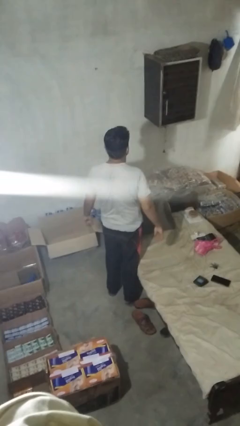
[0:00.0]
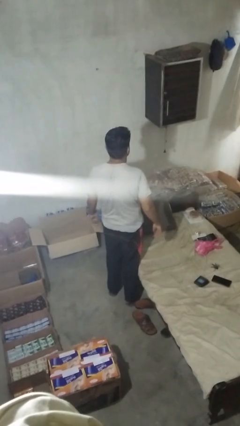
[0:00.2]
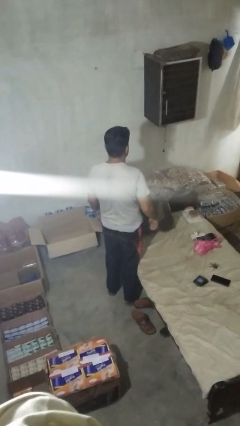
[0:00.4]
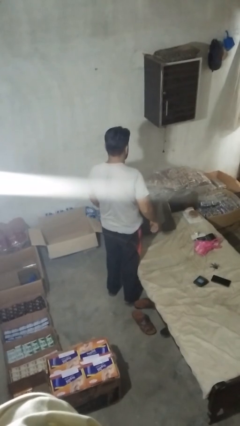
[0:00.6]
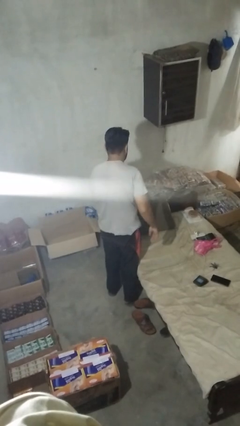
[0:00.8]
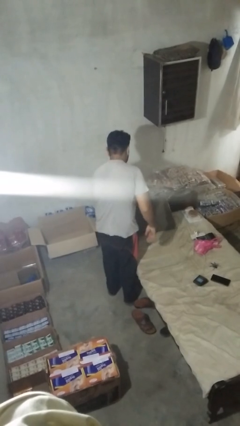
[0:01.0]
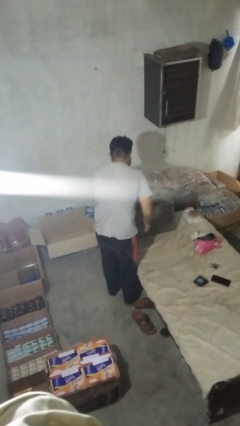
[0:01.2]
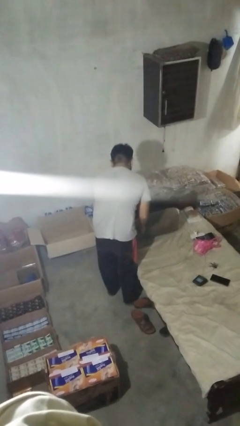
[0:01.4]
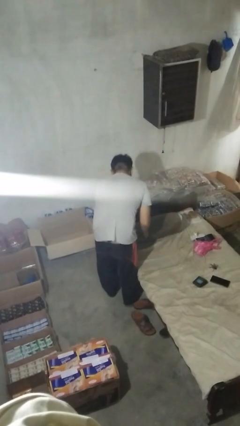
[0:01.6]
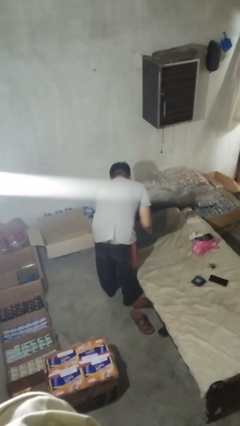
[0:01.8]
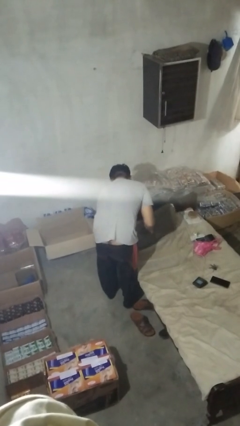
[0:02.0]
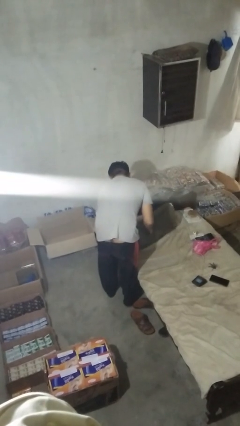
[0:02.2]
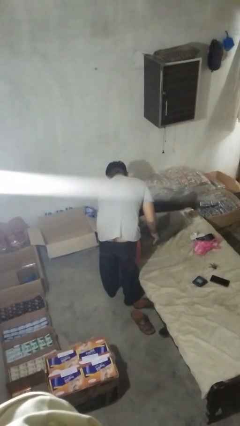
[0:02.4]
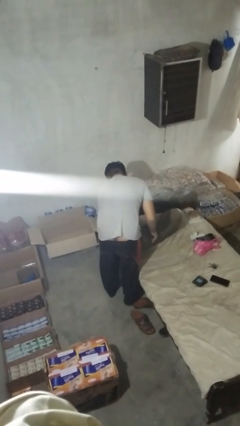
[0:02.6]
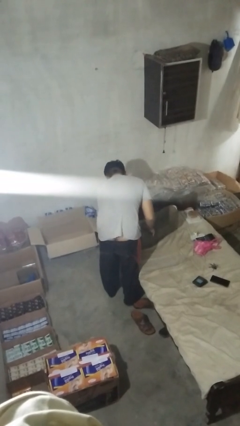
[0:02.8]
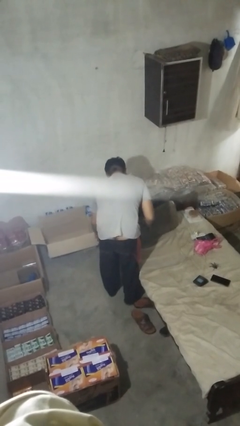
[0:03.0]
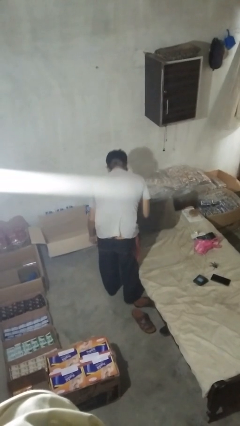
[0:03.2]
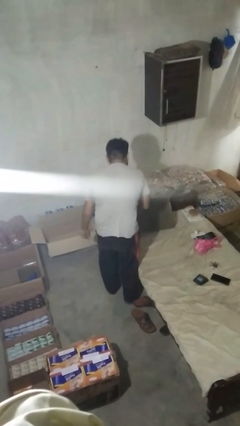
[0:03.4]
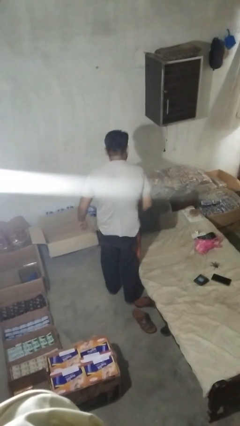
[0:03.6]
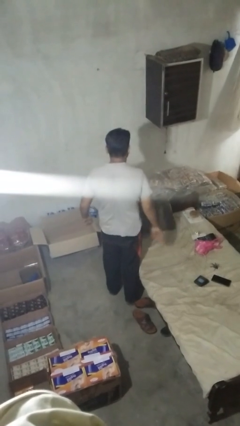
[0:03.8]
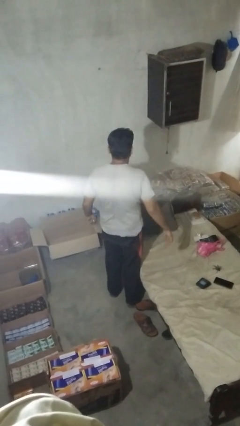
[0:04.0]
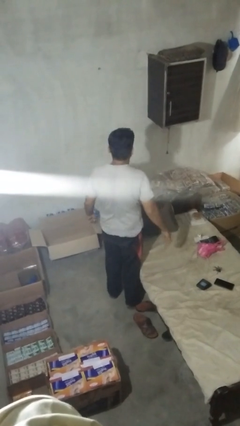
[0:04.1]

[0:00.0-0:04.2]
person searches in couch

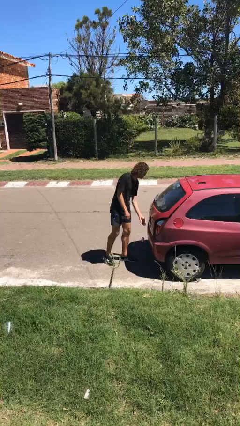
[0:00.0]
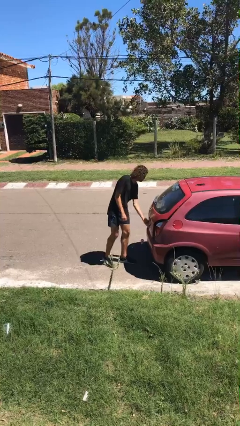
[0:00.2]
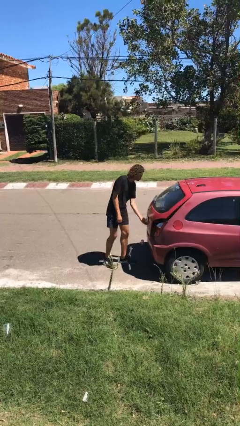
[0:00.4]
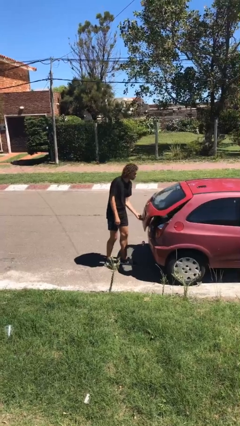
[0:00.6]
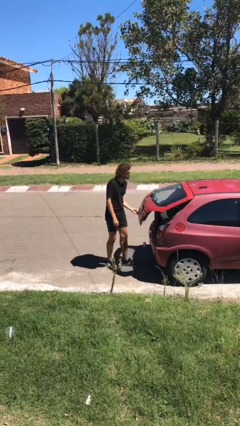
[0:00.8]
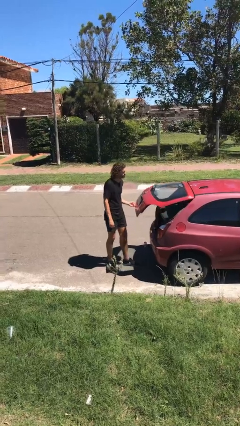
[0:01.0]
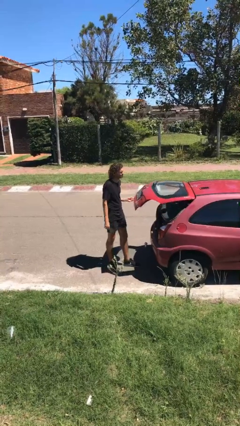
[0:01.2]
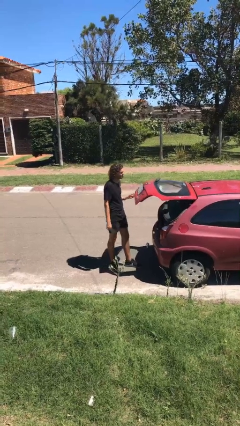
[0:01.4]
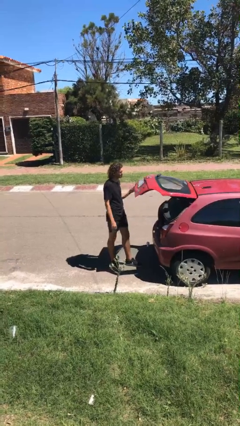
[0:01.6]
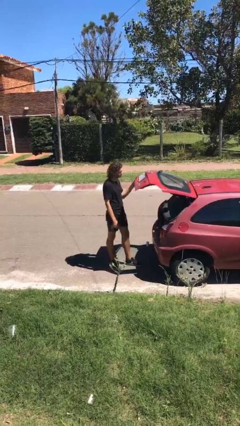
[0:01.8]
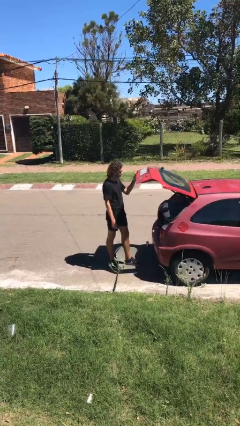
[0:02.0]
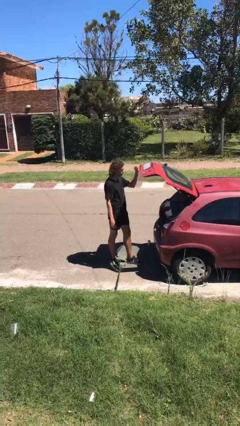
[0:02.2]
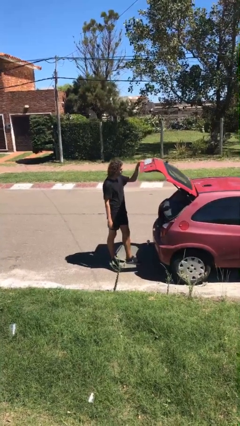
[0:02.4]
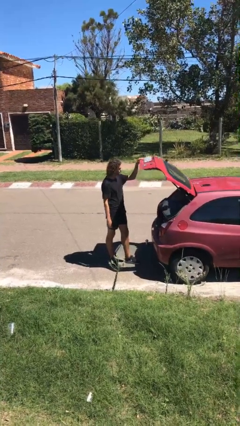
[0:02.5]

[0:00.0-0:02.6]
person opens car trunk

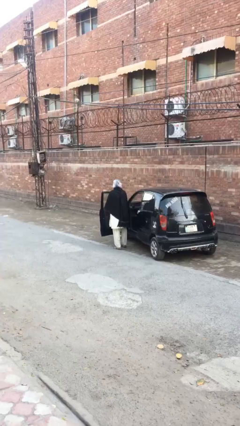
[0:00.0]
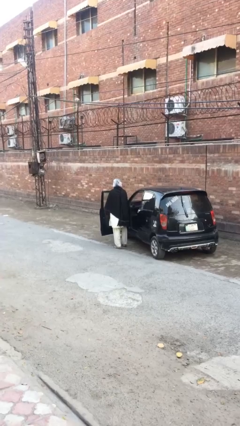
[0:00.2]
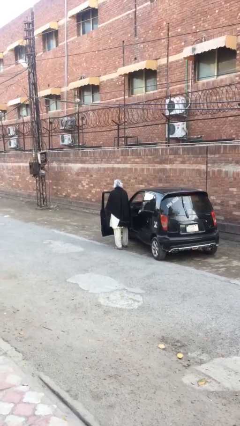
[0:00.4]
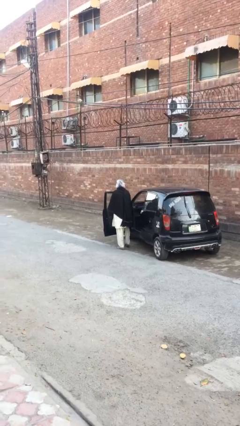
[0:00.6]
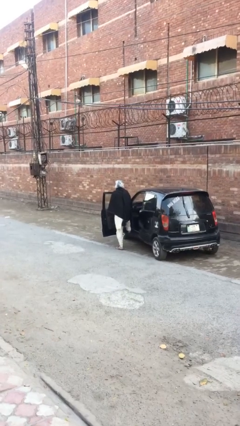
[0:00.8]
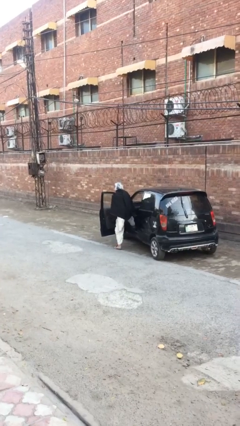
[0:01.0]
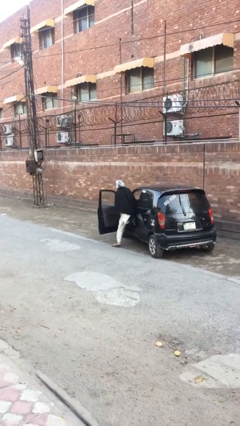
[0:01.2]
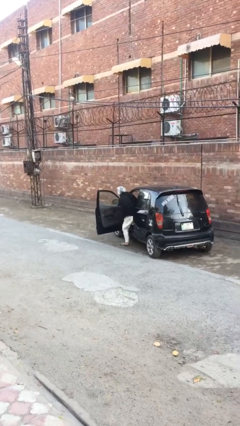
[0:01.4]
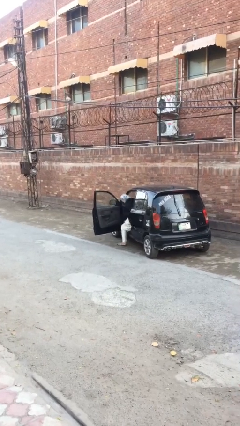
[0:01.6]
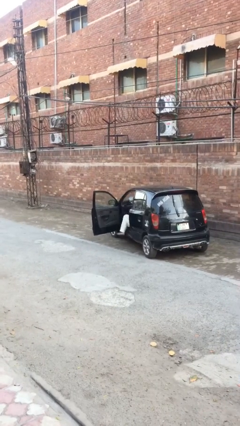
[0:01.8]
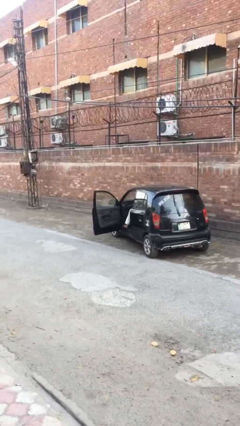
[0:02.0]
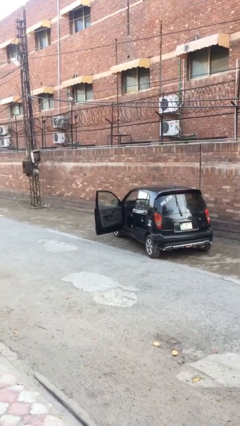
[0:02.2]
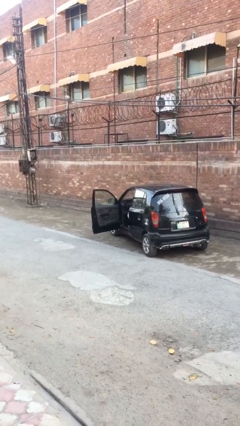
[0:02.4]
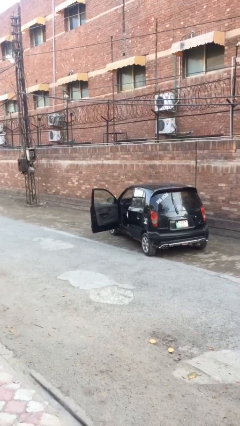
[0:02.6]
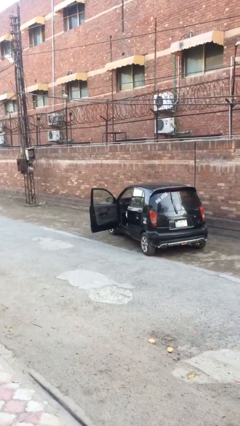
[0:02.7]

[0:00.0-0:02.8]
person enters car

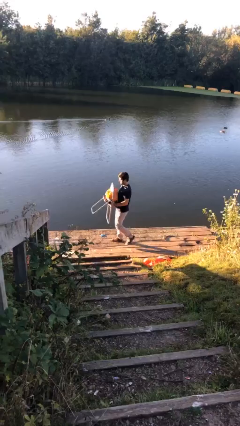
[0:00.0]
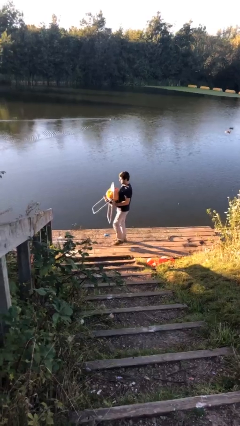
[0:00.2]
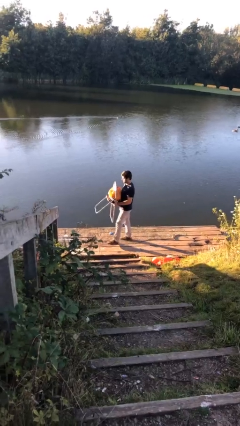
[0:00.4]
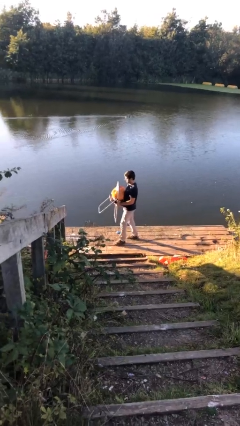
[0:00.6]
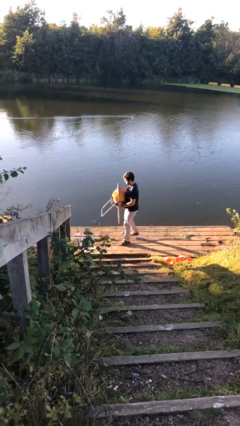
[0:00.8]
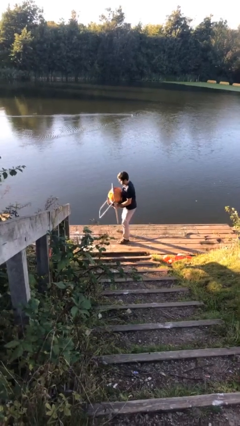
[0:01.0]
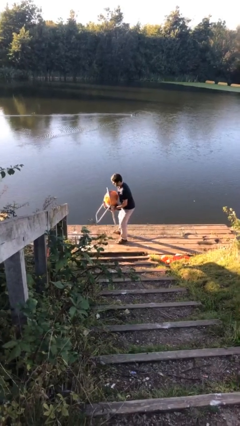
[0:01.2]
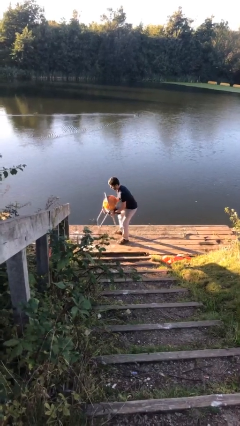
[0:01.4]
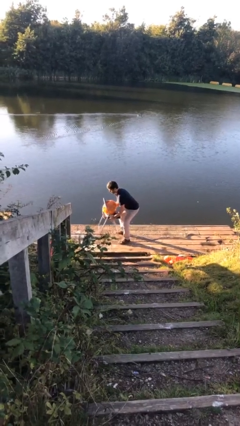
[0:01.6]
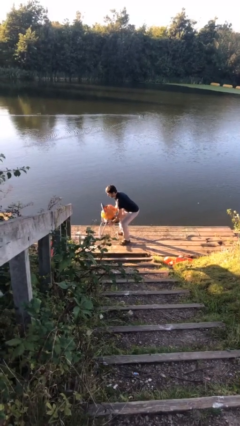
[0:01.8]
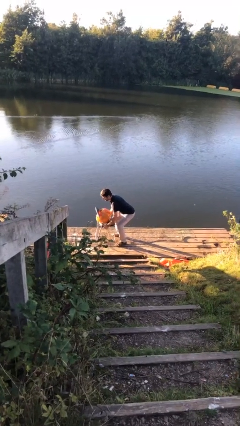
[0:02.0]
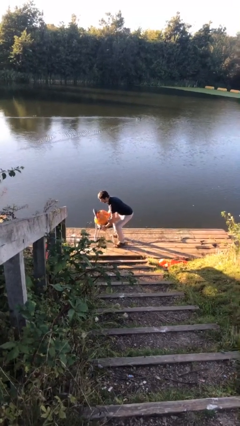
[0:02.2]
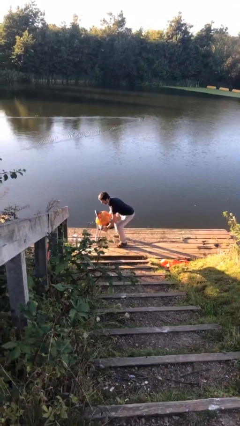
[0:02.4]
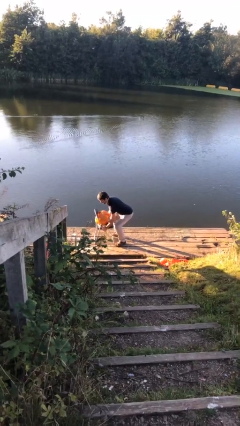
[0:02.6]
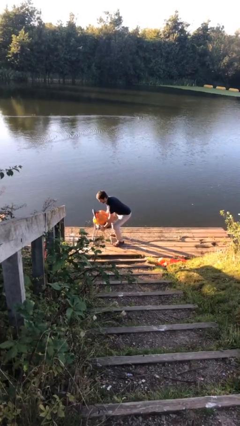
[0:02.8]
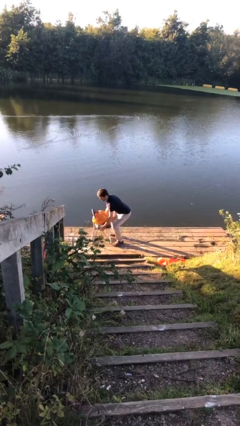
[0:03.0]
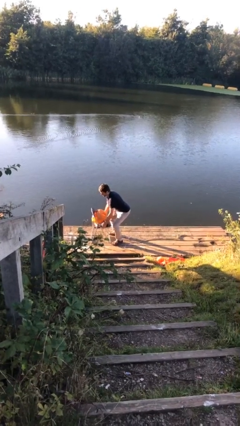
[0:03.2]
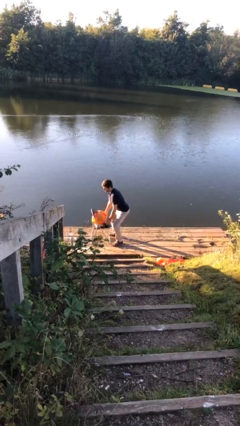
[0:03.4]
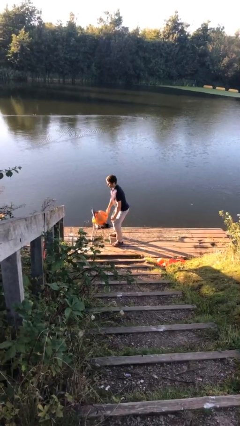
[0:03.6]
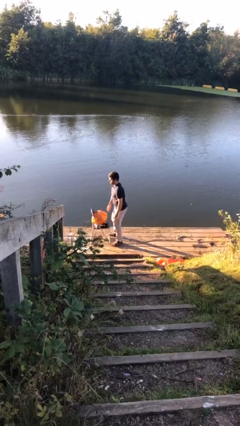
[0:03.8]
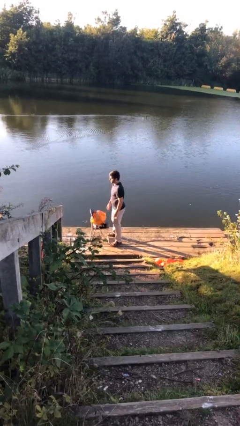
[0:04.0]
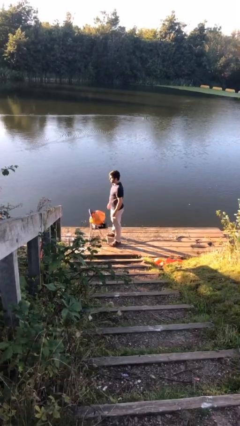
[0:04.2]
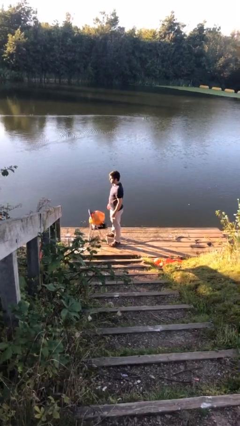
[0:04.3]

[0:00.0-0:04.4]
person puts down object on floor

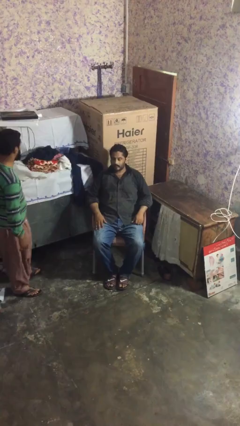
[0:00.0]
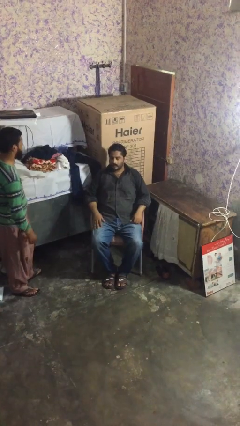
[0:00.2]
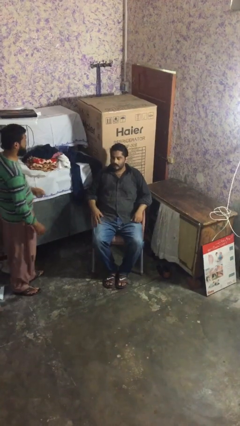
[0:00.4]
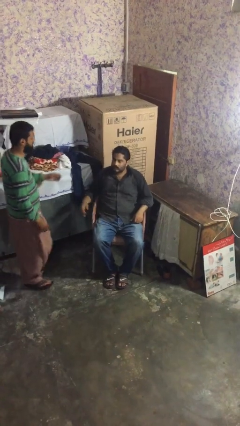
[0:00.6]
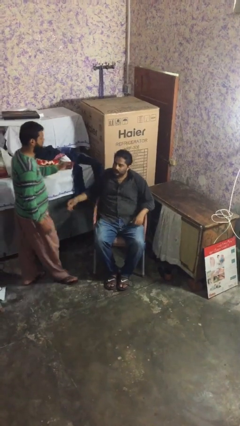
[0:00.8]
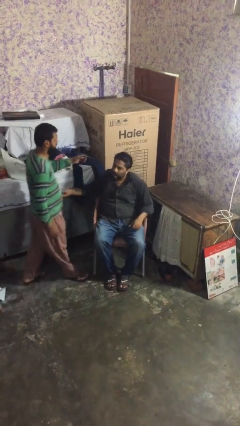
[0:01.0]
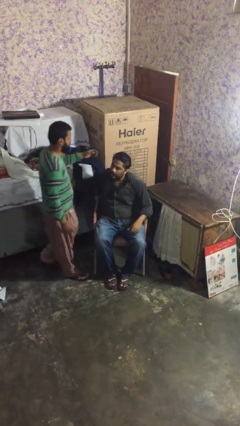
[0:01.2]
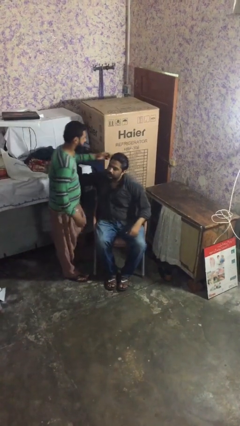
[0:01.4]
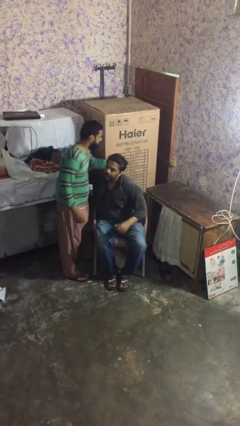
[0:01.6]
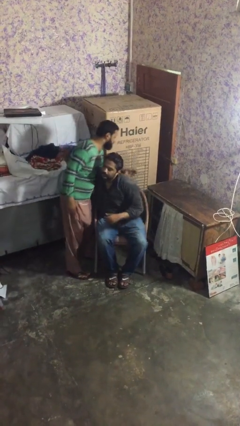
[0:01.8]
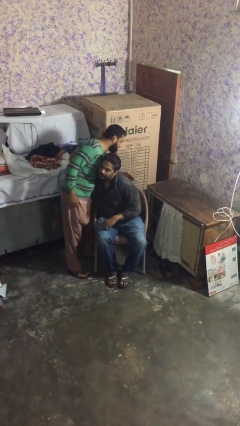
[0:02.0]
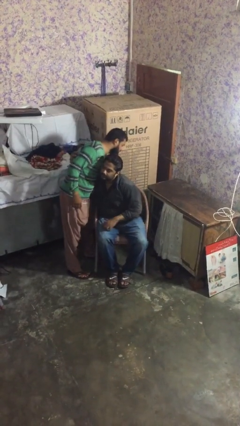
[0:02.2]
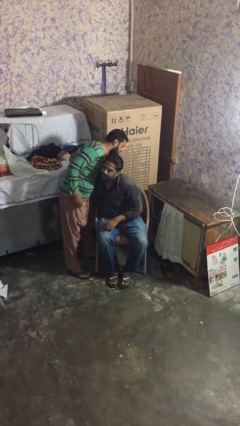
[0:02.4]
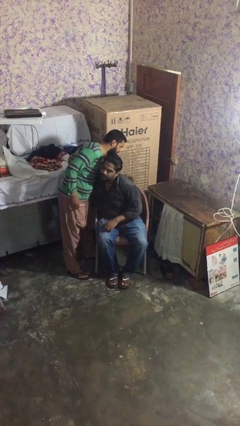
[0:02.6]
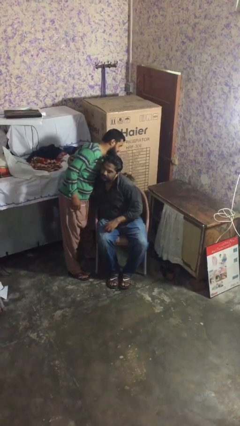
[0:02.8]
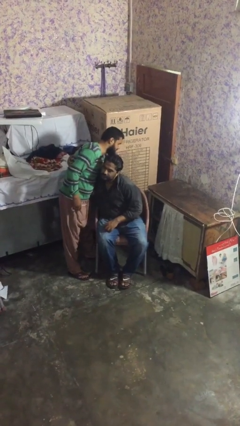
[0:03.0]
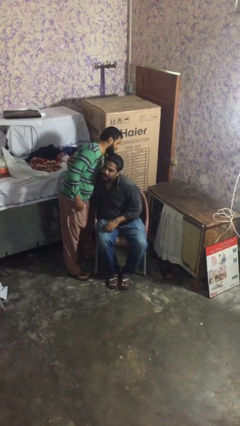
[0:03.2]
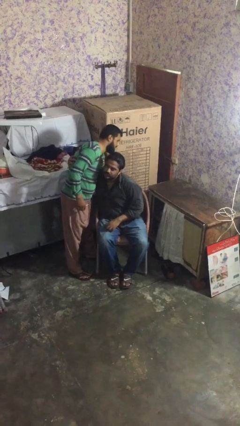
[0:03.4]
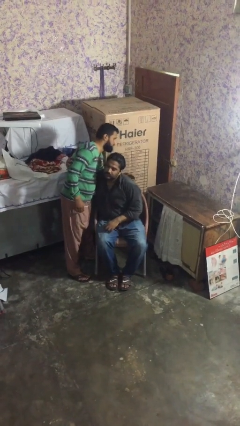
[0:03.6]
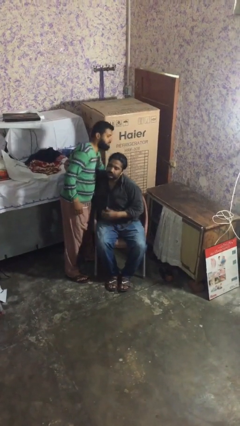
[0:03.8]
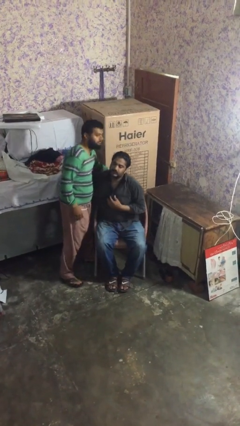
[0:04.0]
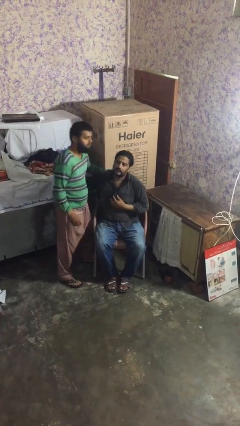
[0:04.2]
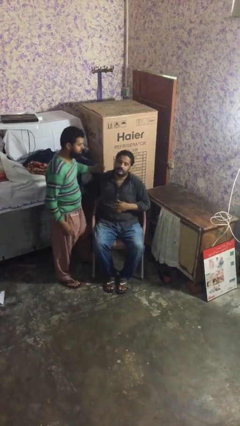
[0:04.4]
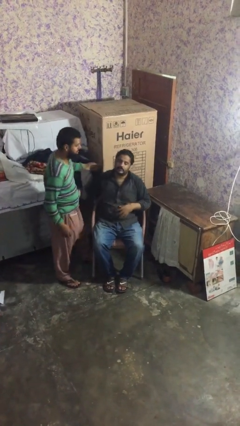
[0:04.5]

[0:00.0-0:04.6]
person embraces person
